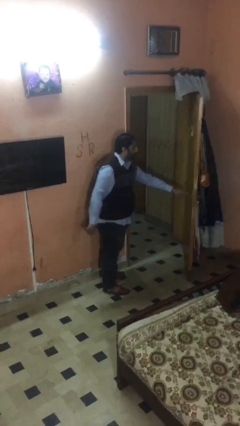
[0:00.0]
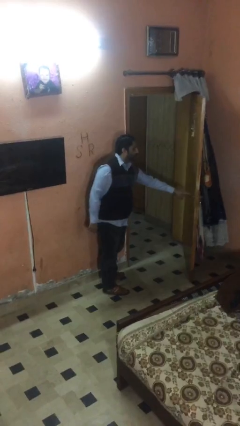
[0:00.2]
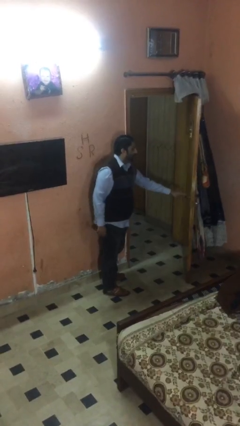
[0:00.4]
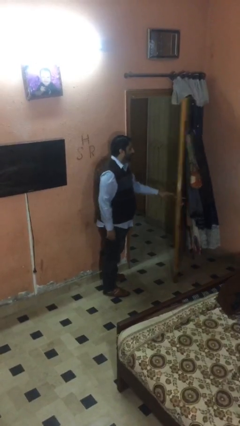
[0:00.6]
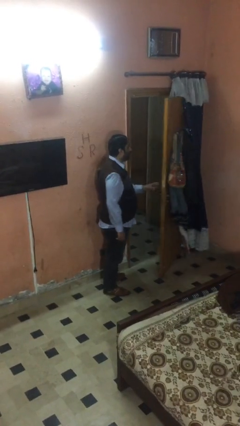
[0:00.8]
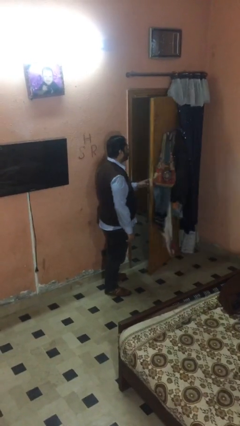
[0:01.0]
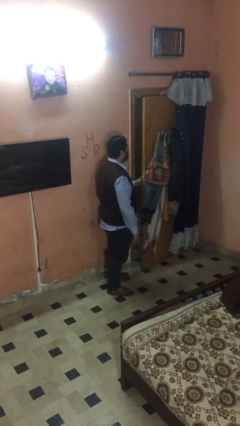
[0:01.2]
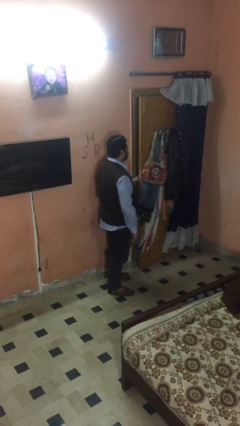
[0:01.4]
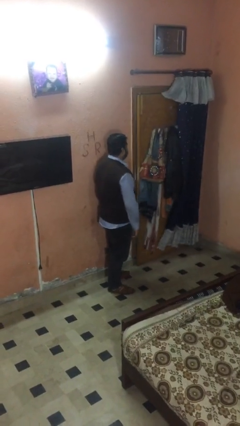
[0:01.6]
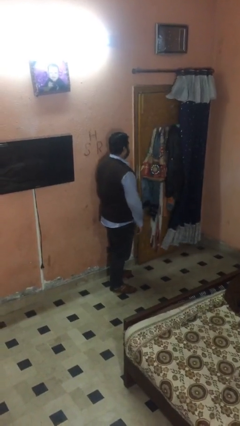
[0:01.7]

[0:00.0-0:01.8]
person closes facility door

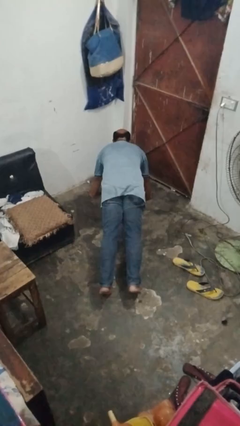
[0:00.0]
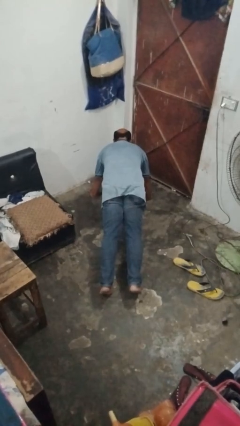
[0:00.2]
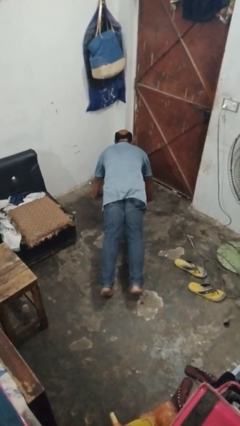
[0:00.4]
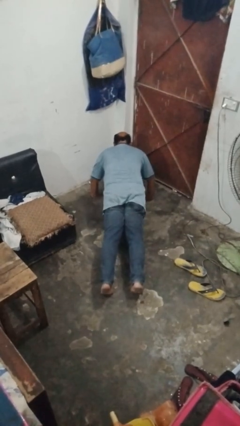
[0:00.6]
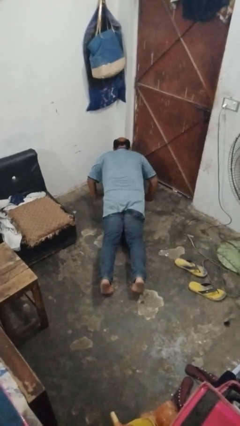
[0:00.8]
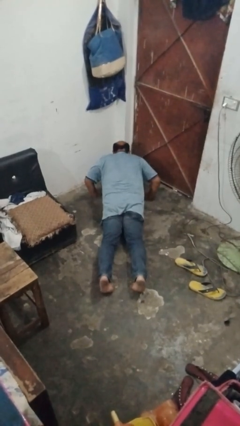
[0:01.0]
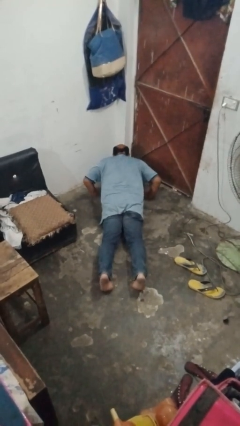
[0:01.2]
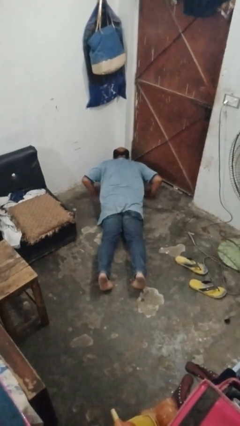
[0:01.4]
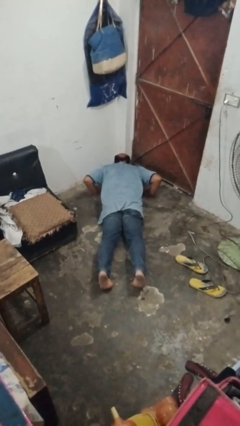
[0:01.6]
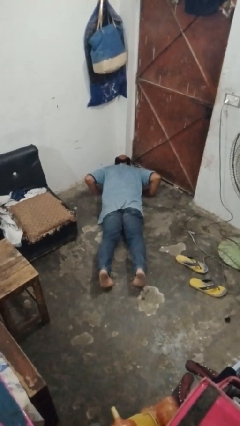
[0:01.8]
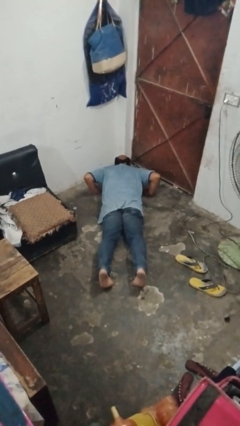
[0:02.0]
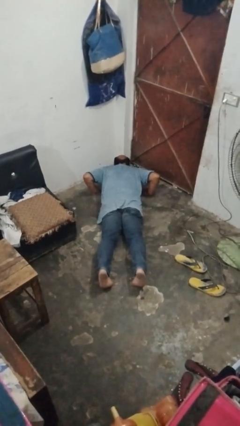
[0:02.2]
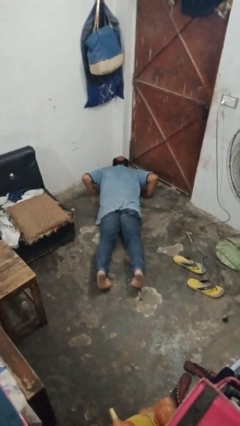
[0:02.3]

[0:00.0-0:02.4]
person exercises with pushup

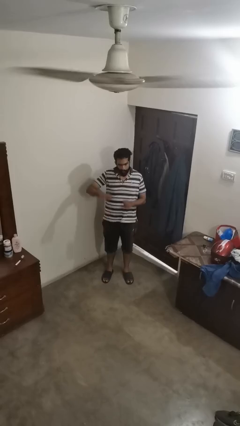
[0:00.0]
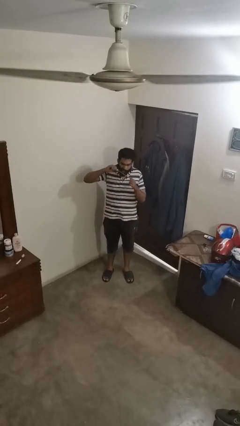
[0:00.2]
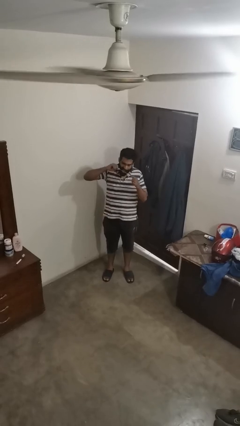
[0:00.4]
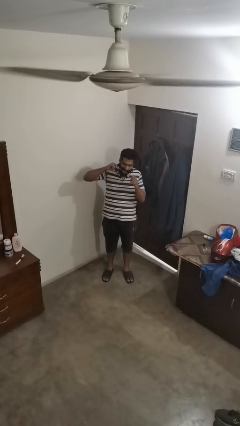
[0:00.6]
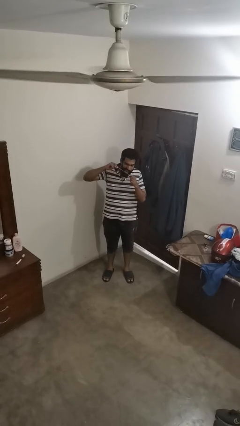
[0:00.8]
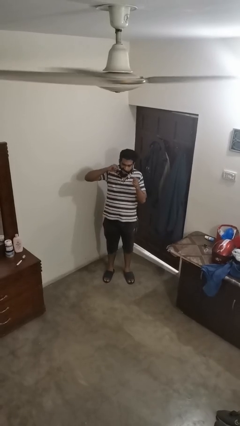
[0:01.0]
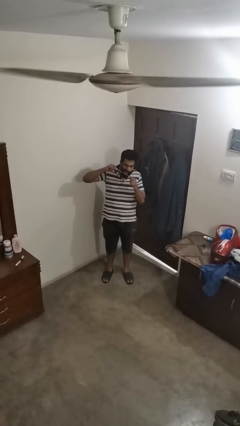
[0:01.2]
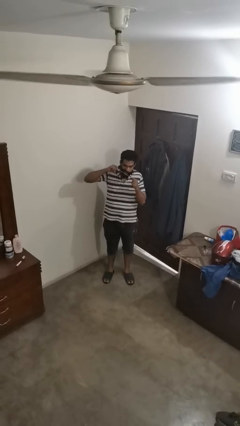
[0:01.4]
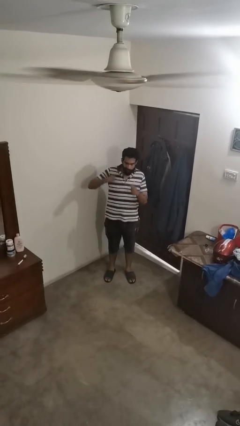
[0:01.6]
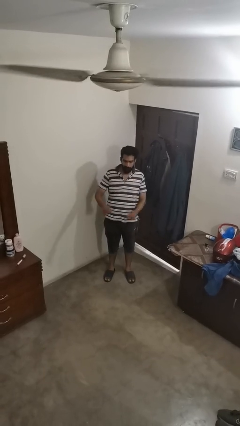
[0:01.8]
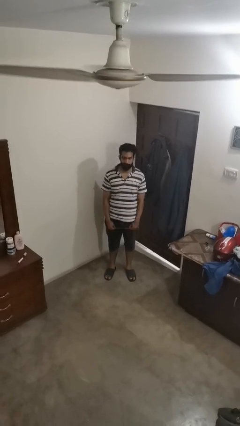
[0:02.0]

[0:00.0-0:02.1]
person flosses

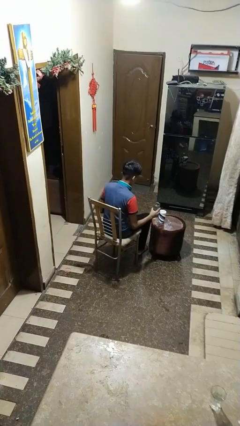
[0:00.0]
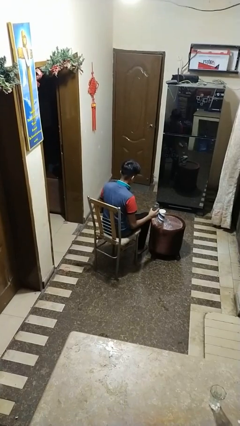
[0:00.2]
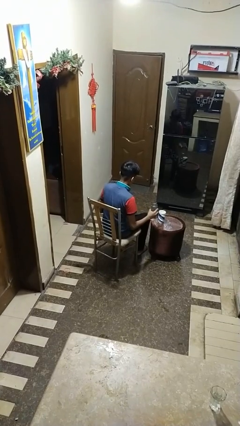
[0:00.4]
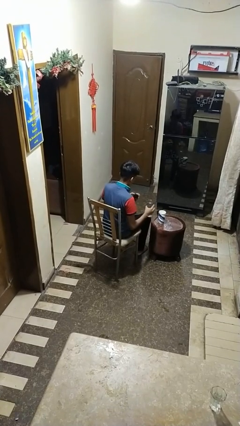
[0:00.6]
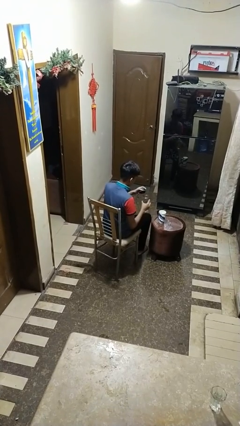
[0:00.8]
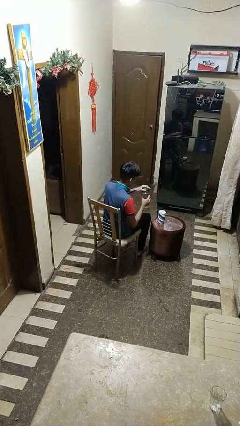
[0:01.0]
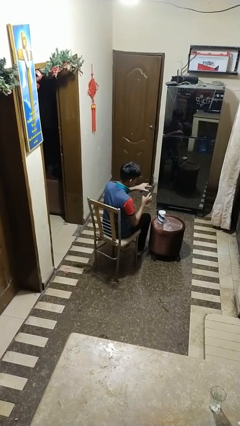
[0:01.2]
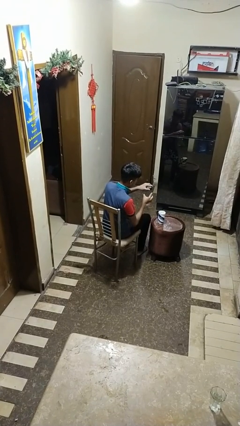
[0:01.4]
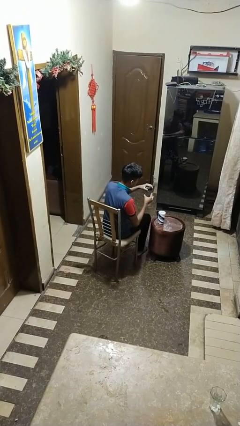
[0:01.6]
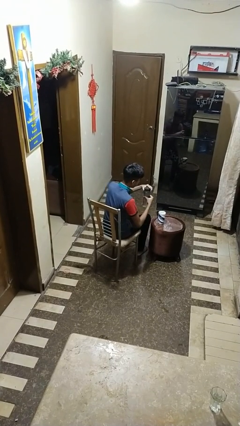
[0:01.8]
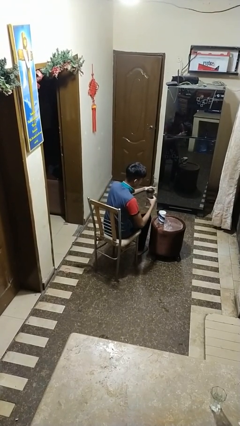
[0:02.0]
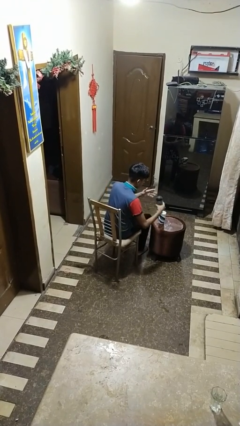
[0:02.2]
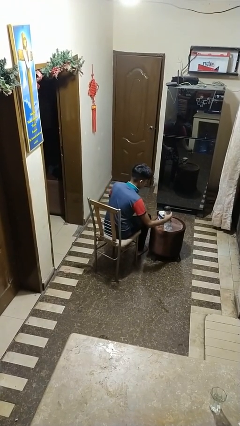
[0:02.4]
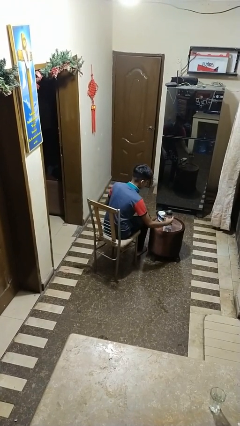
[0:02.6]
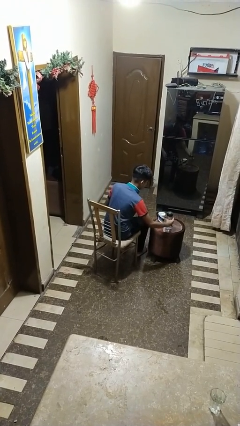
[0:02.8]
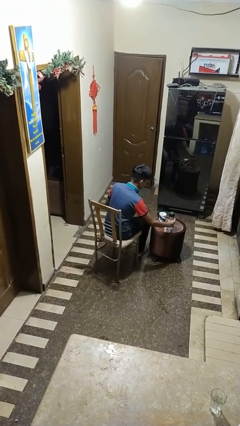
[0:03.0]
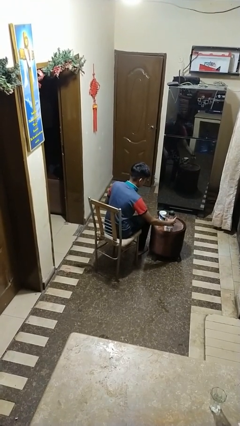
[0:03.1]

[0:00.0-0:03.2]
person screws lid to bottle

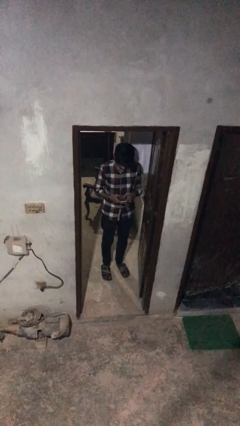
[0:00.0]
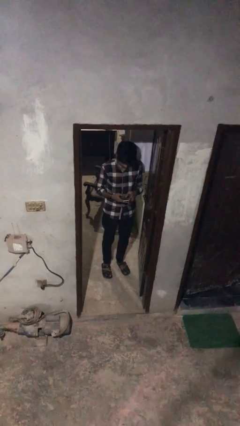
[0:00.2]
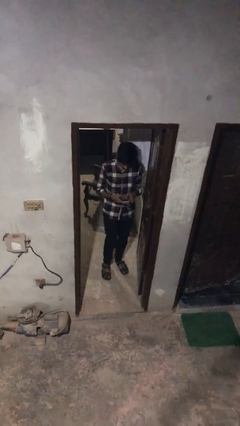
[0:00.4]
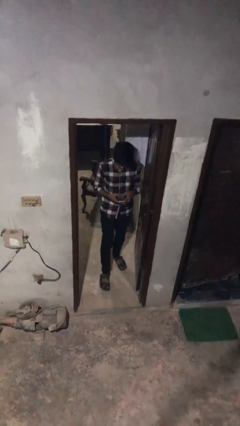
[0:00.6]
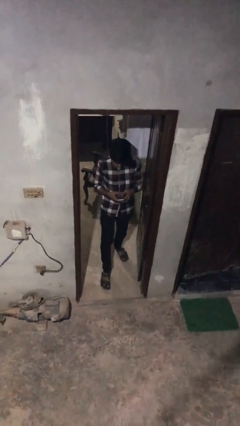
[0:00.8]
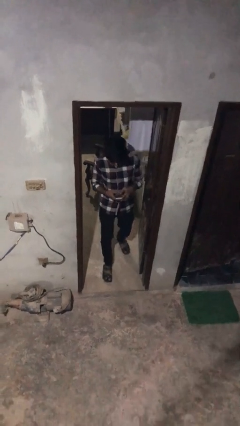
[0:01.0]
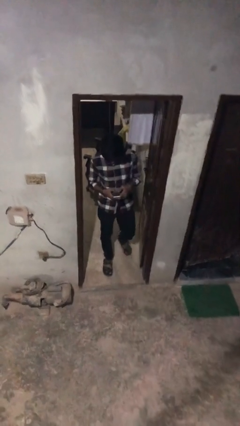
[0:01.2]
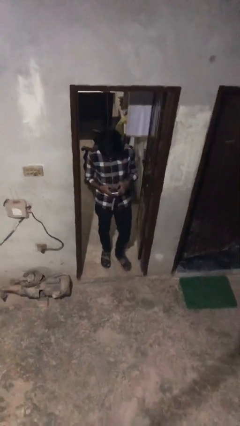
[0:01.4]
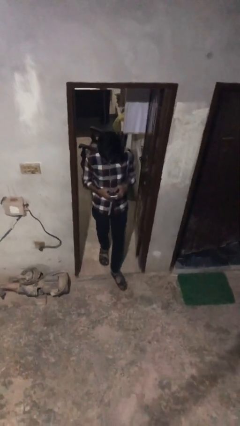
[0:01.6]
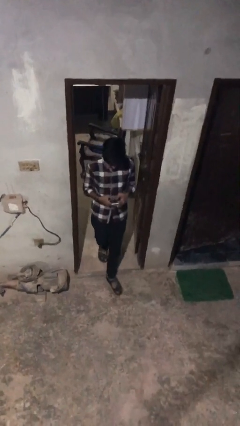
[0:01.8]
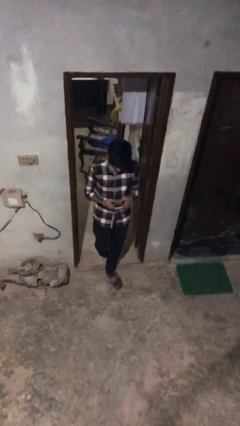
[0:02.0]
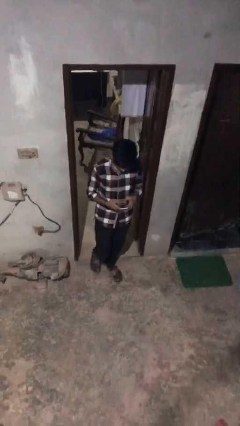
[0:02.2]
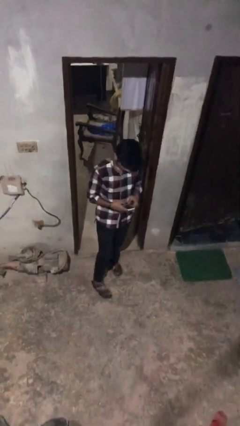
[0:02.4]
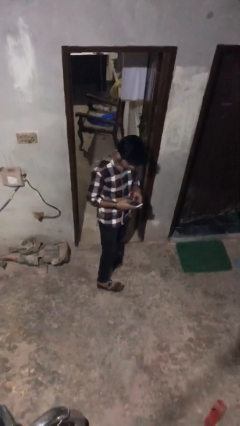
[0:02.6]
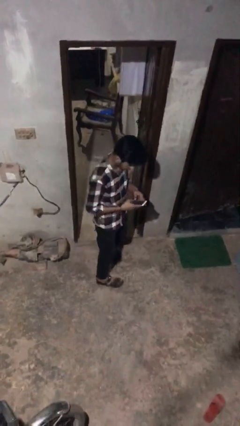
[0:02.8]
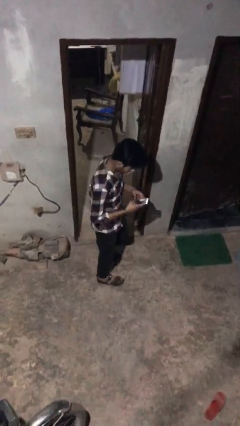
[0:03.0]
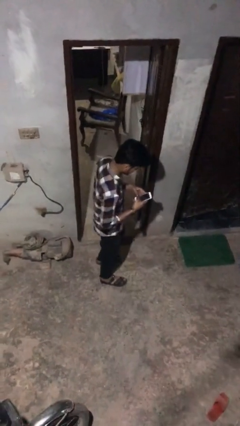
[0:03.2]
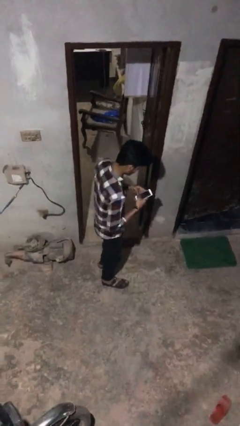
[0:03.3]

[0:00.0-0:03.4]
person enters scene through structure

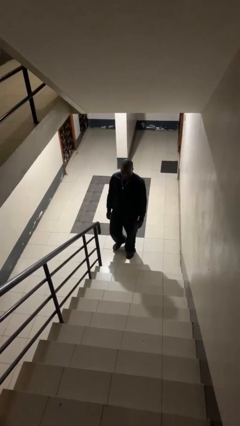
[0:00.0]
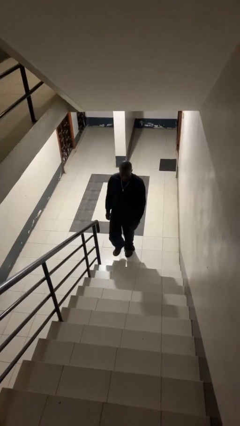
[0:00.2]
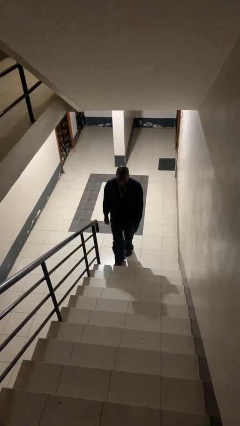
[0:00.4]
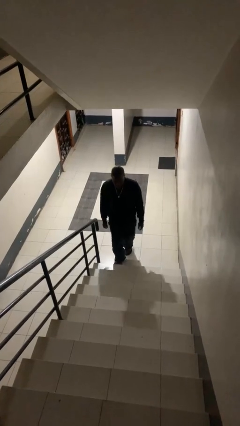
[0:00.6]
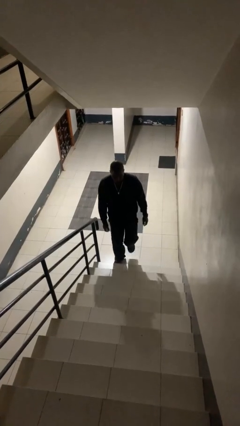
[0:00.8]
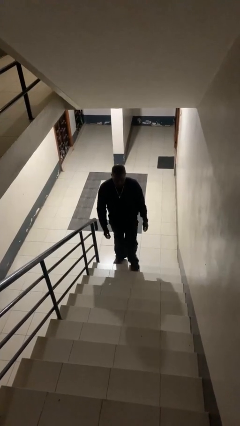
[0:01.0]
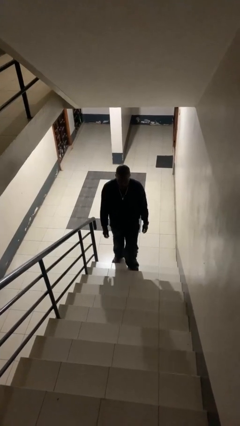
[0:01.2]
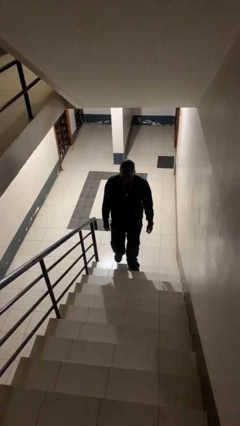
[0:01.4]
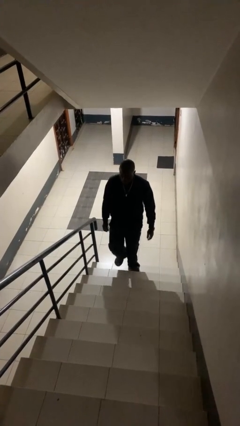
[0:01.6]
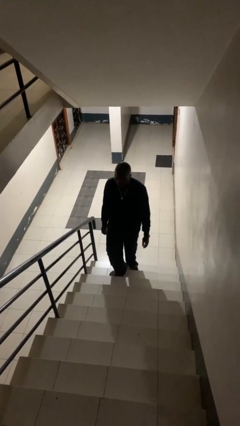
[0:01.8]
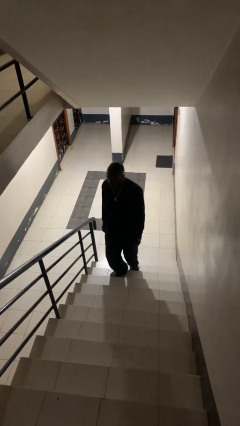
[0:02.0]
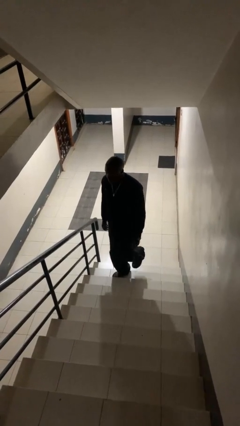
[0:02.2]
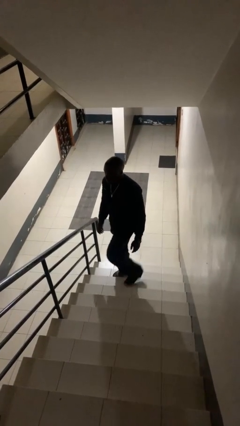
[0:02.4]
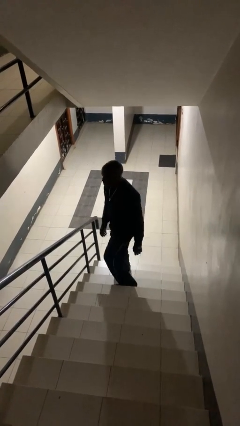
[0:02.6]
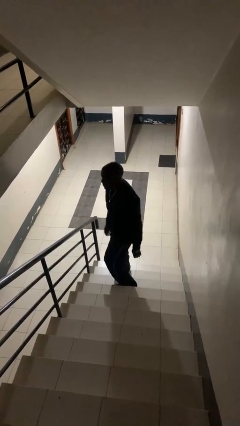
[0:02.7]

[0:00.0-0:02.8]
person climbs up stairs

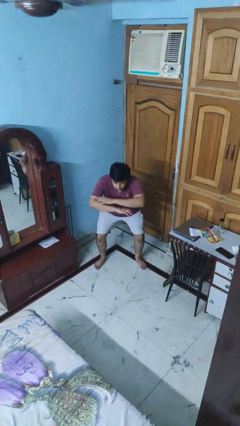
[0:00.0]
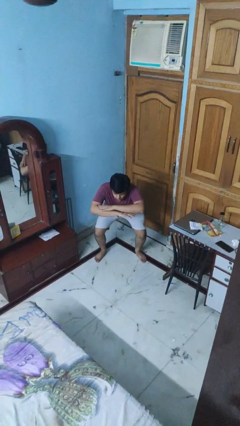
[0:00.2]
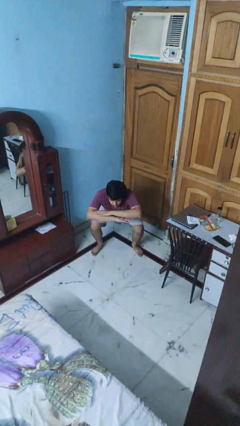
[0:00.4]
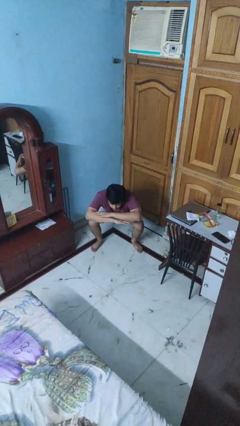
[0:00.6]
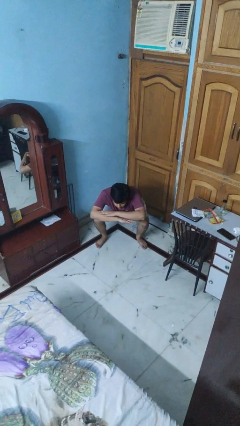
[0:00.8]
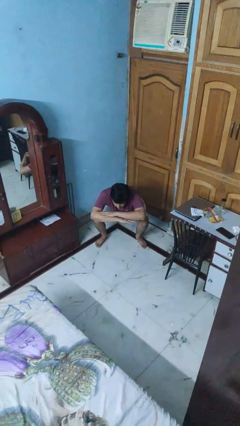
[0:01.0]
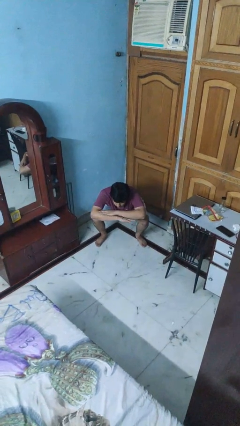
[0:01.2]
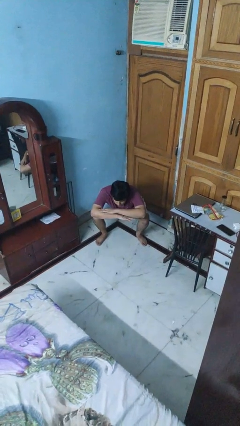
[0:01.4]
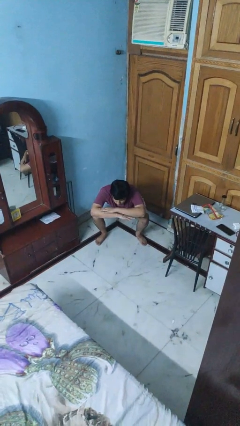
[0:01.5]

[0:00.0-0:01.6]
person squats
